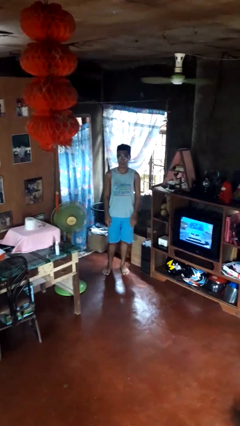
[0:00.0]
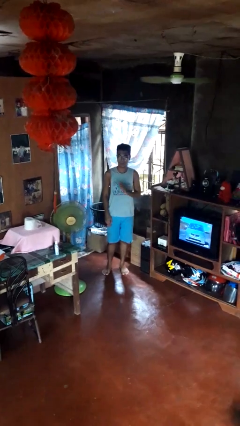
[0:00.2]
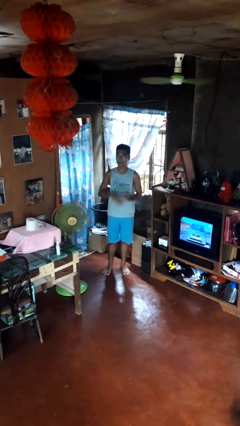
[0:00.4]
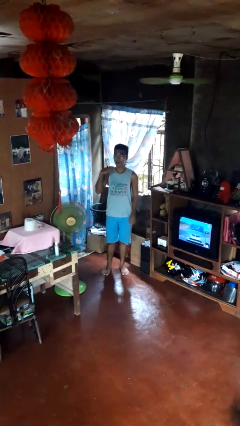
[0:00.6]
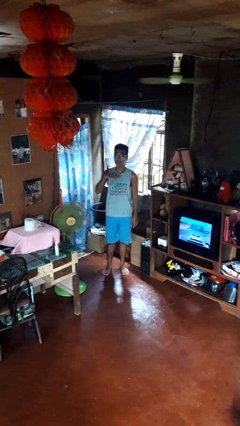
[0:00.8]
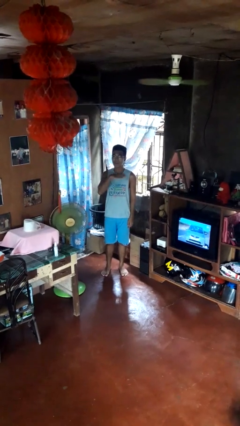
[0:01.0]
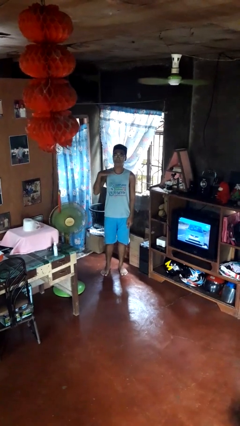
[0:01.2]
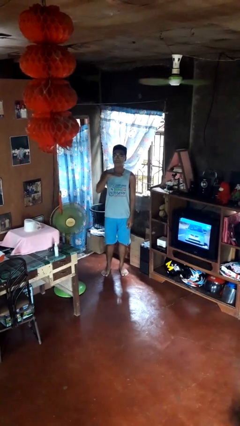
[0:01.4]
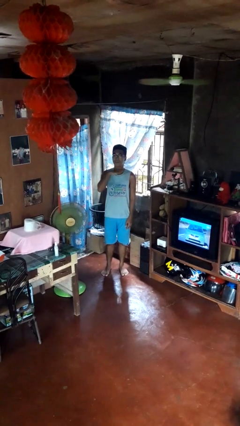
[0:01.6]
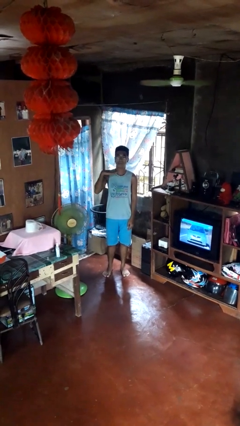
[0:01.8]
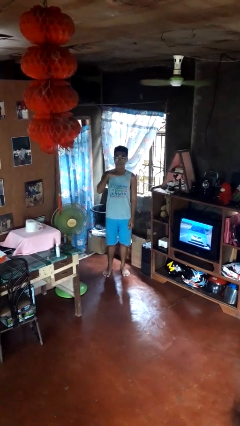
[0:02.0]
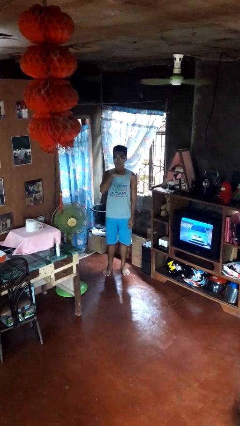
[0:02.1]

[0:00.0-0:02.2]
person gestures cut

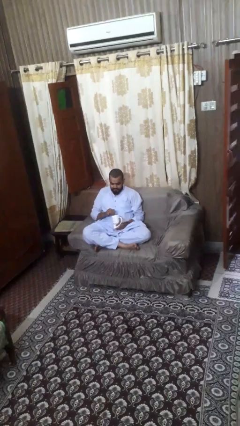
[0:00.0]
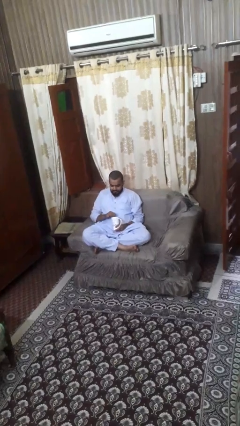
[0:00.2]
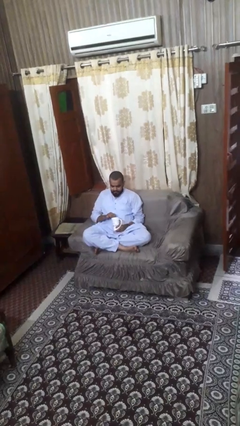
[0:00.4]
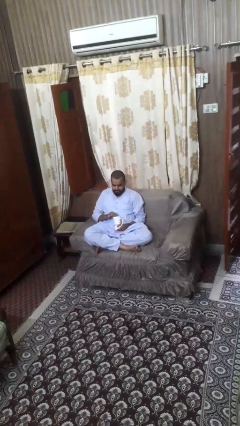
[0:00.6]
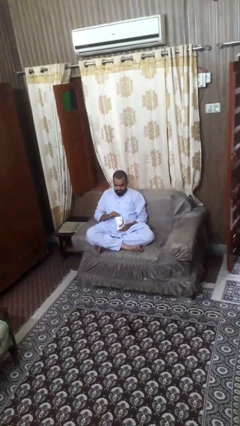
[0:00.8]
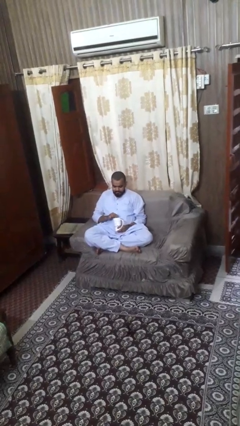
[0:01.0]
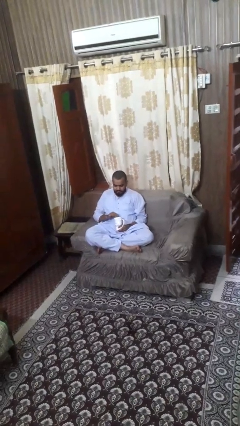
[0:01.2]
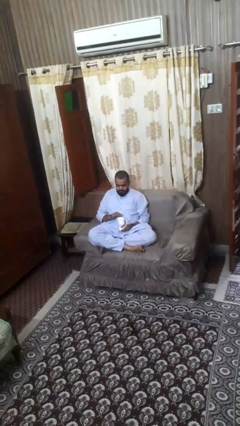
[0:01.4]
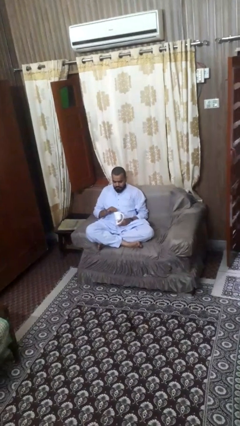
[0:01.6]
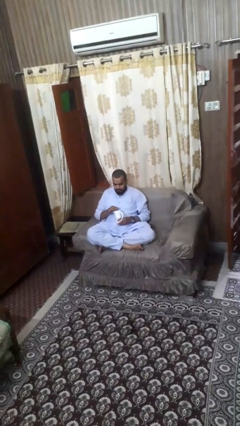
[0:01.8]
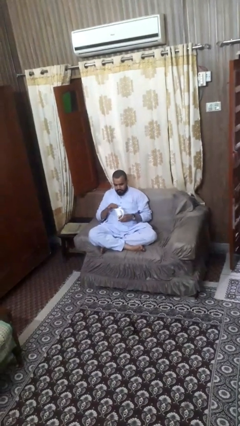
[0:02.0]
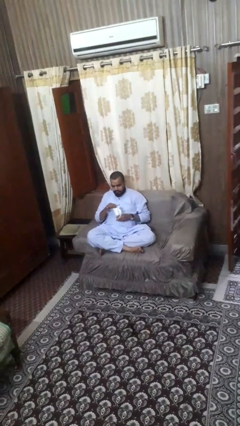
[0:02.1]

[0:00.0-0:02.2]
person stirs mug

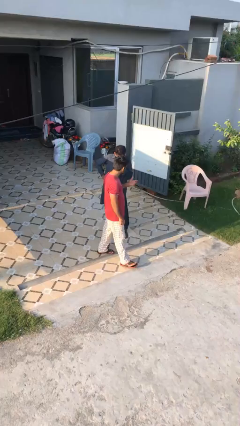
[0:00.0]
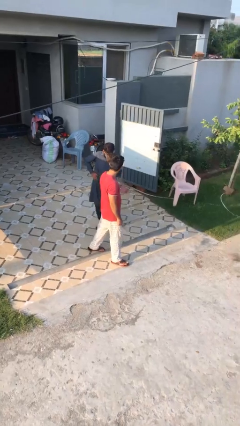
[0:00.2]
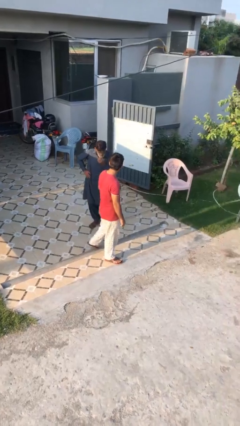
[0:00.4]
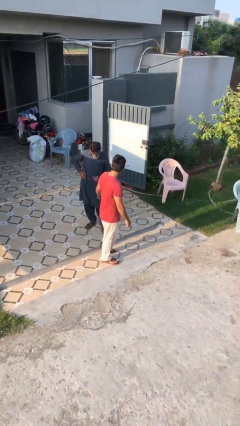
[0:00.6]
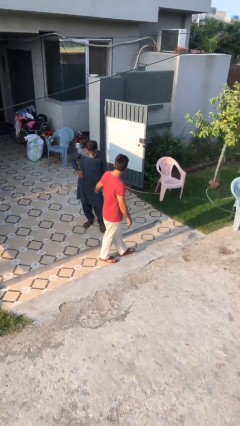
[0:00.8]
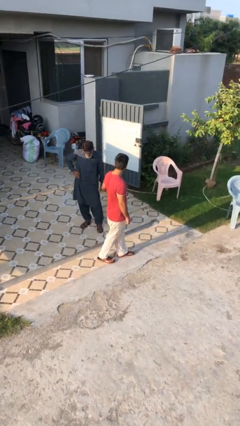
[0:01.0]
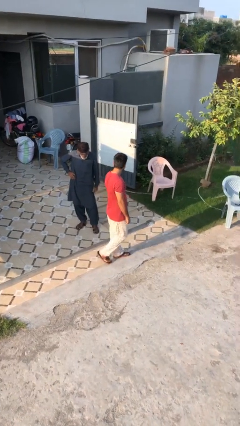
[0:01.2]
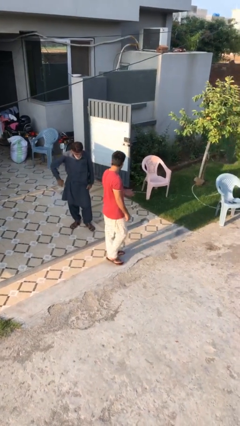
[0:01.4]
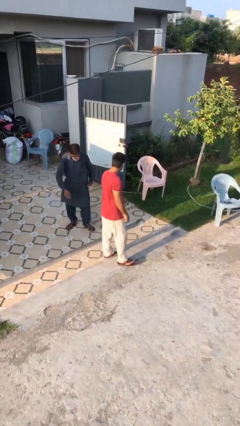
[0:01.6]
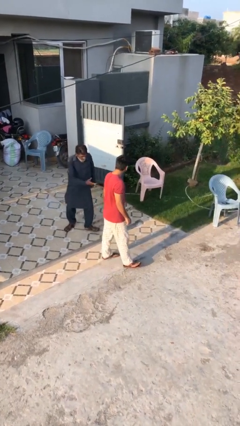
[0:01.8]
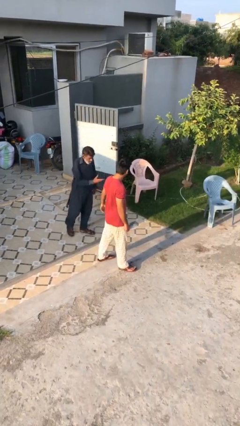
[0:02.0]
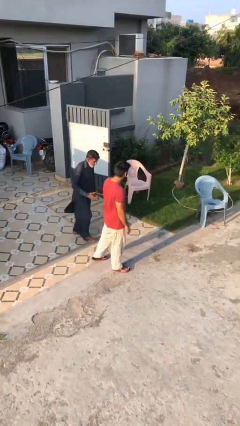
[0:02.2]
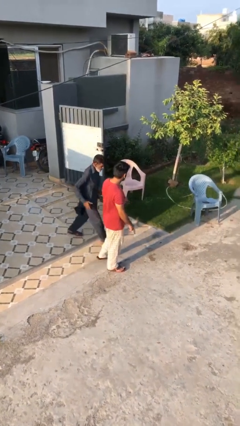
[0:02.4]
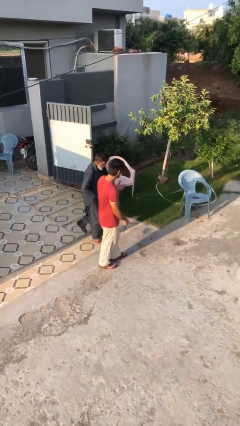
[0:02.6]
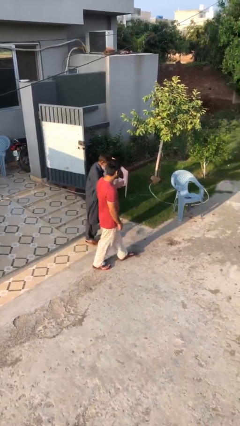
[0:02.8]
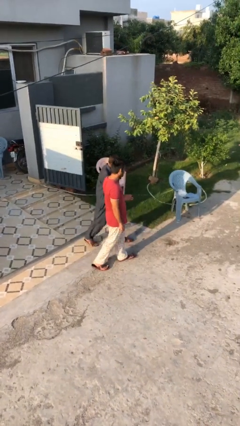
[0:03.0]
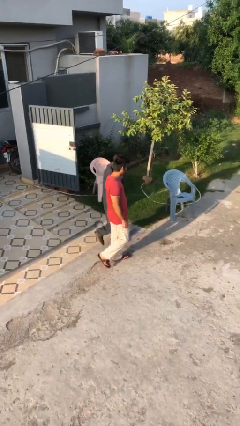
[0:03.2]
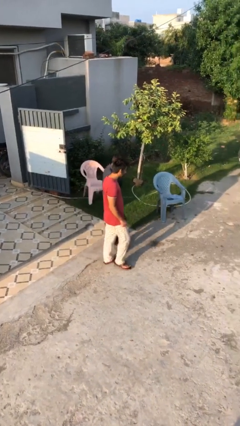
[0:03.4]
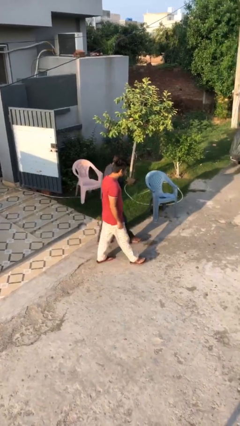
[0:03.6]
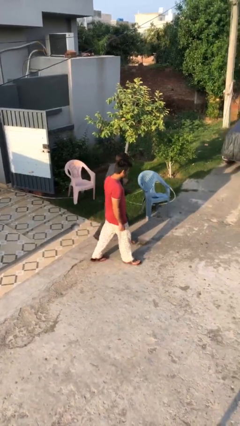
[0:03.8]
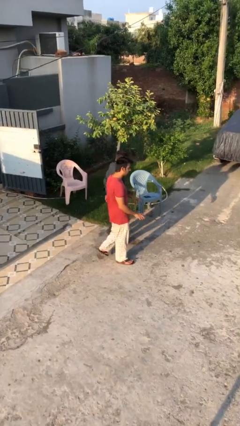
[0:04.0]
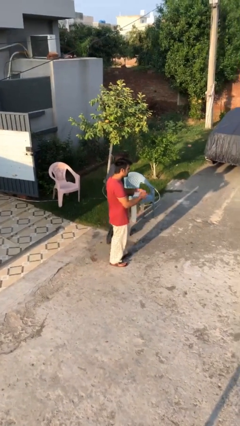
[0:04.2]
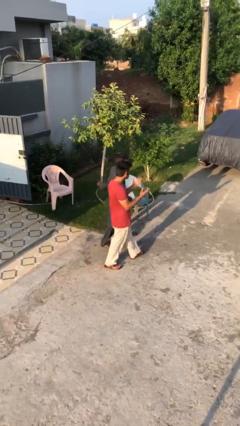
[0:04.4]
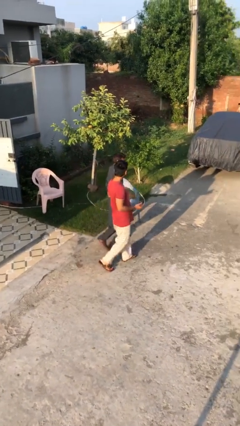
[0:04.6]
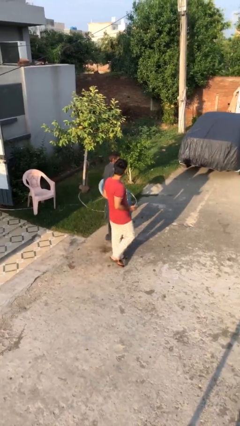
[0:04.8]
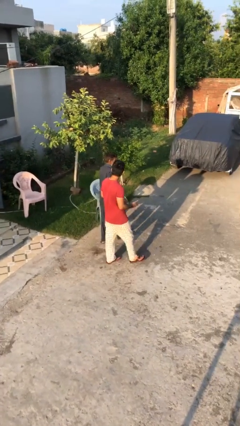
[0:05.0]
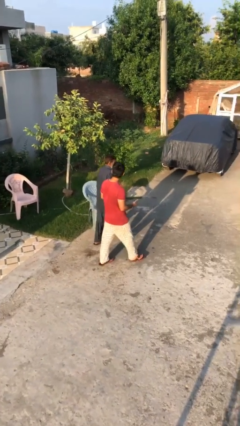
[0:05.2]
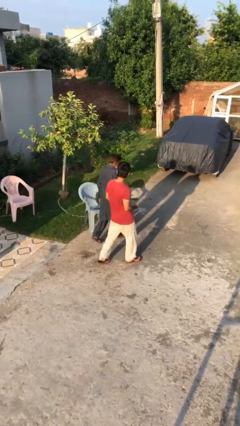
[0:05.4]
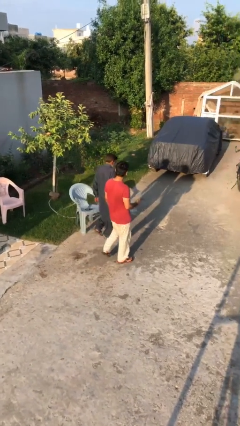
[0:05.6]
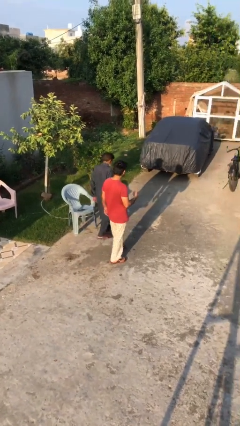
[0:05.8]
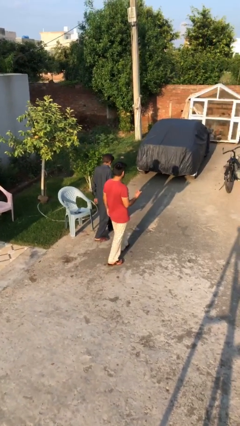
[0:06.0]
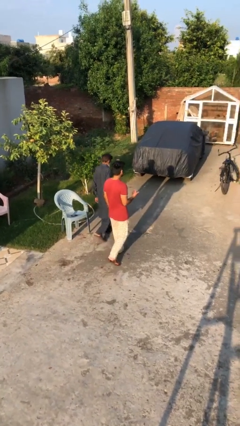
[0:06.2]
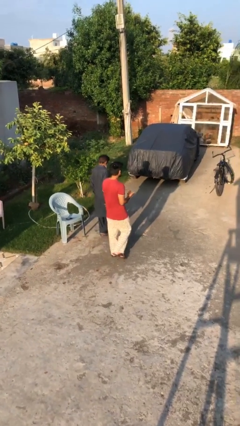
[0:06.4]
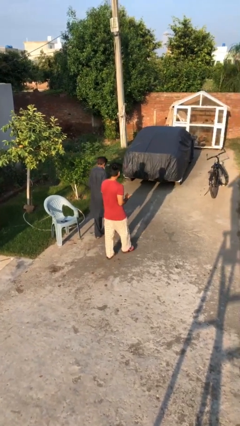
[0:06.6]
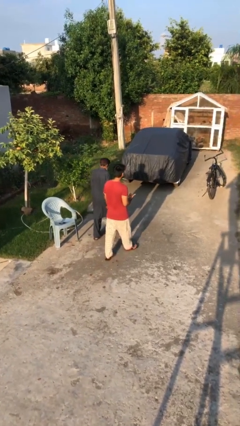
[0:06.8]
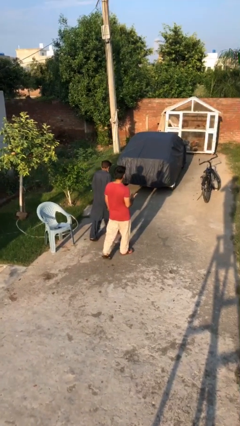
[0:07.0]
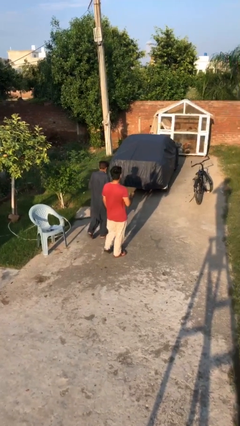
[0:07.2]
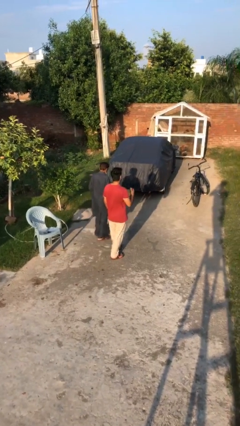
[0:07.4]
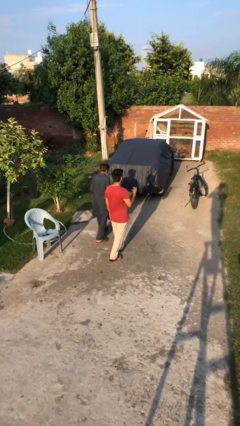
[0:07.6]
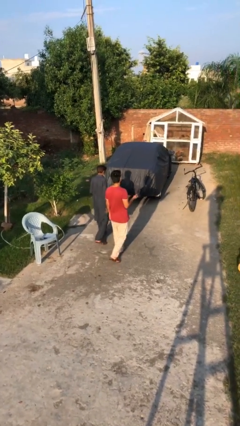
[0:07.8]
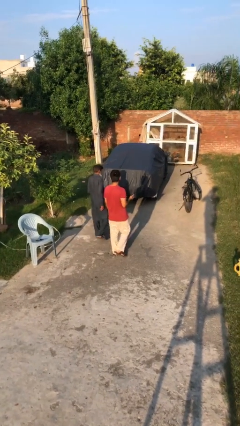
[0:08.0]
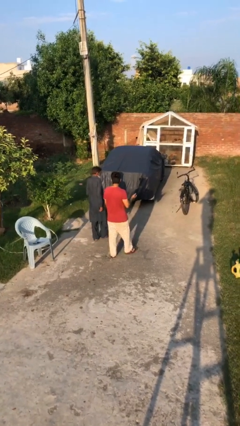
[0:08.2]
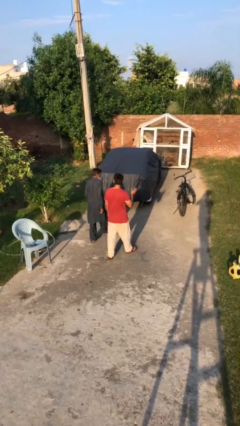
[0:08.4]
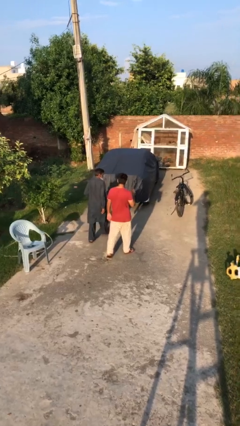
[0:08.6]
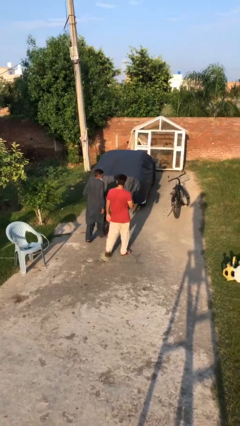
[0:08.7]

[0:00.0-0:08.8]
person talks to person

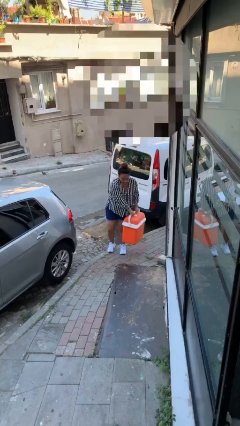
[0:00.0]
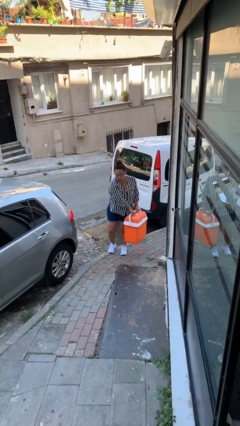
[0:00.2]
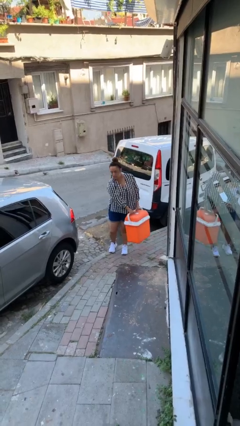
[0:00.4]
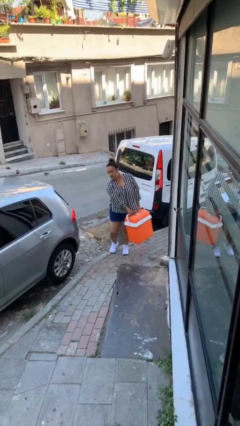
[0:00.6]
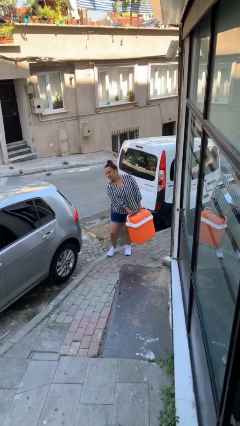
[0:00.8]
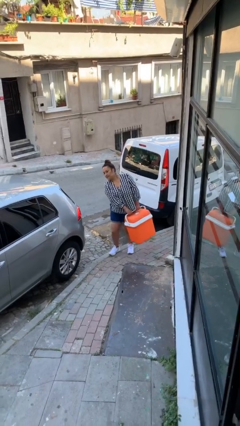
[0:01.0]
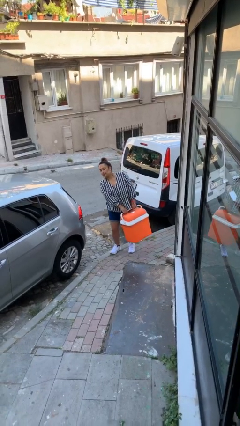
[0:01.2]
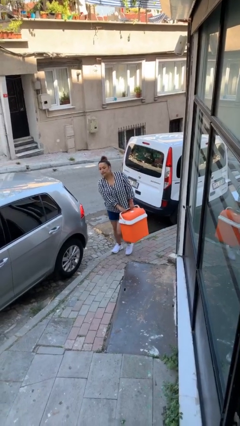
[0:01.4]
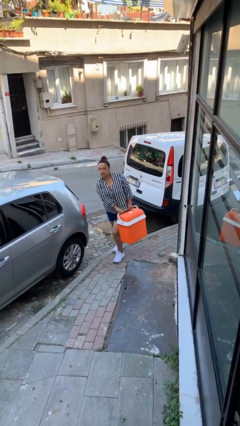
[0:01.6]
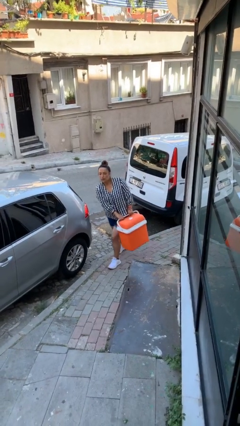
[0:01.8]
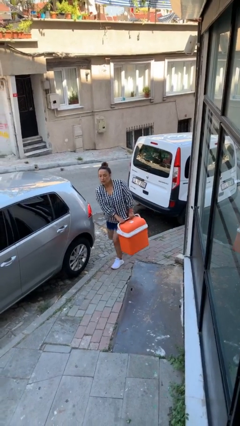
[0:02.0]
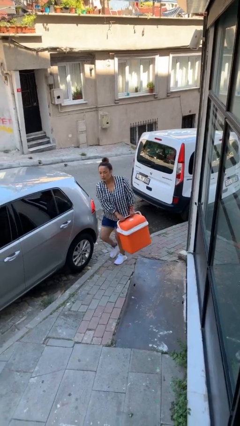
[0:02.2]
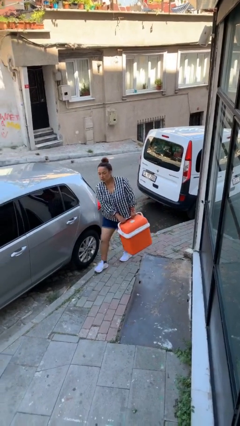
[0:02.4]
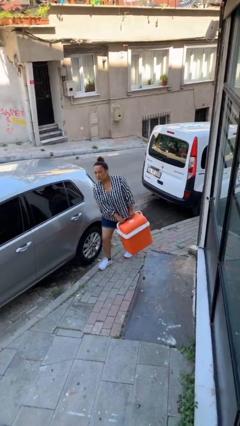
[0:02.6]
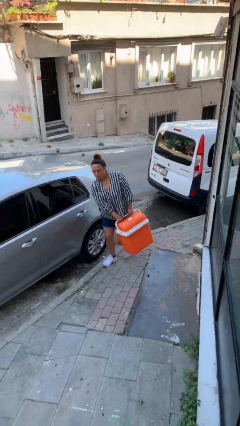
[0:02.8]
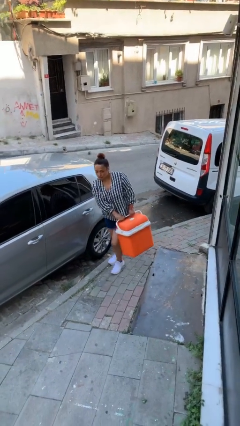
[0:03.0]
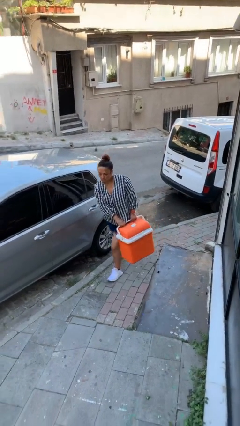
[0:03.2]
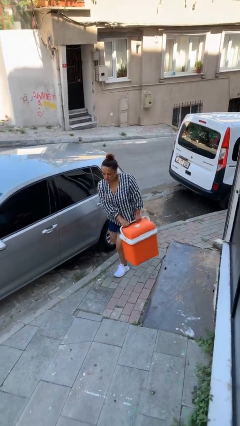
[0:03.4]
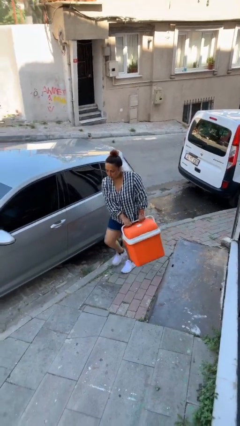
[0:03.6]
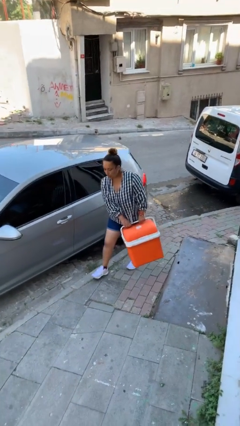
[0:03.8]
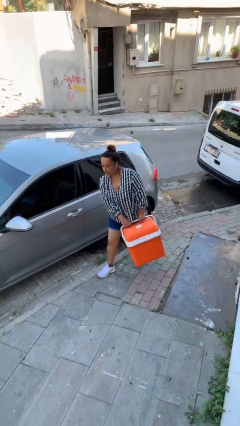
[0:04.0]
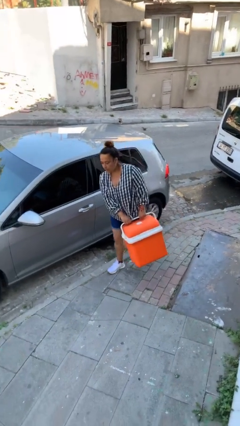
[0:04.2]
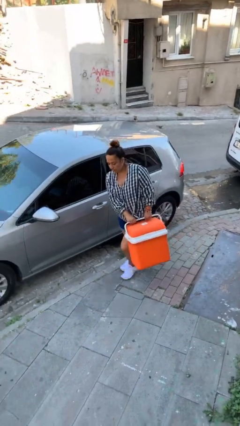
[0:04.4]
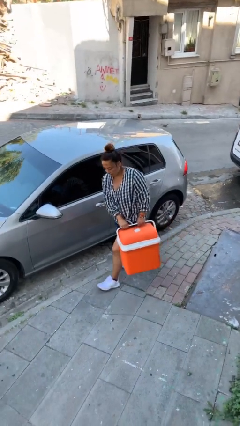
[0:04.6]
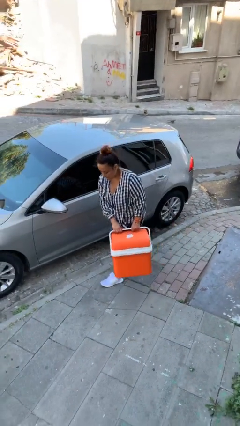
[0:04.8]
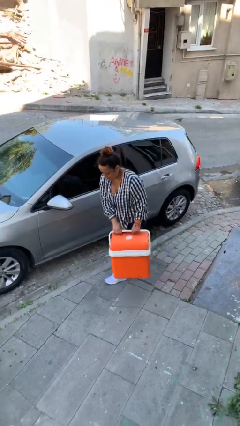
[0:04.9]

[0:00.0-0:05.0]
person carries heavy object
